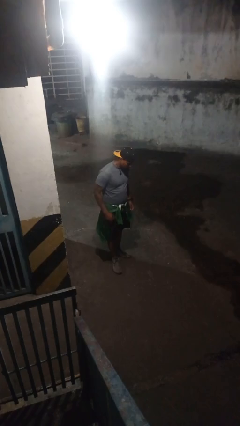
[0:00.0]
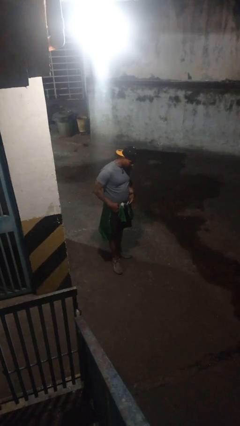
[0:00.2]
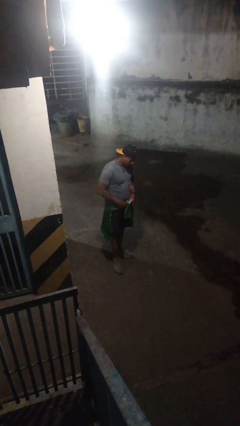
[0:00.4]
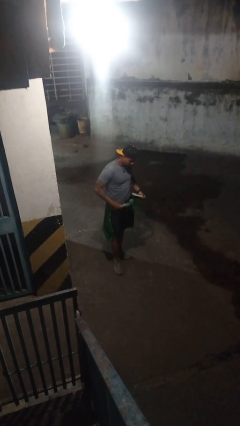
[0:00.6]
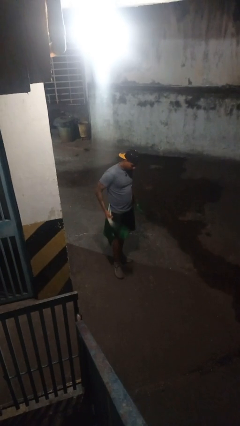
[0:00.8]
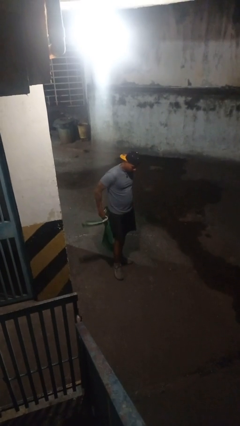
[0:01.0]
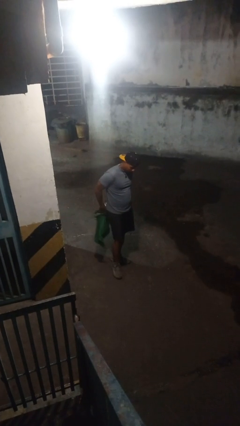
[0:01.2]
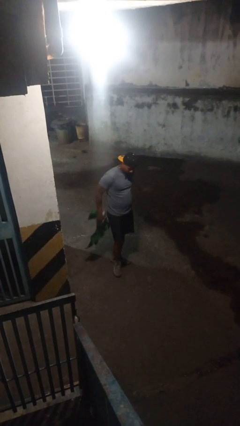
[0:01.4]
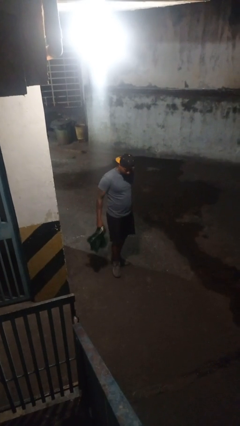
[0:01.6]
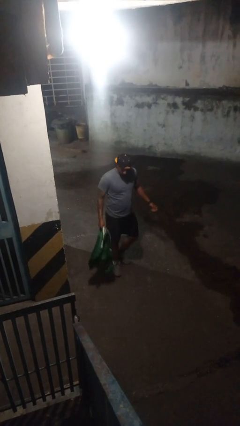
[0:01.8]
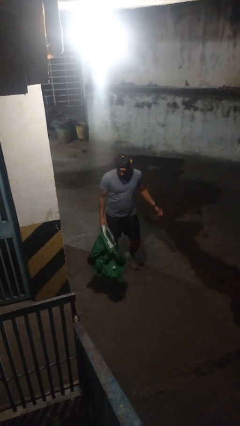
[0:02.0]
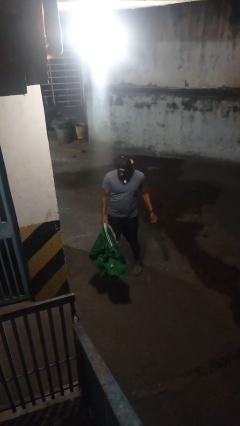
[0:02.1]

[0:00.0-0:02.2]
person unties jacket around waist

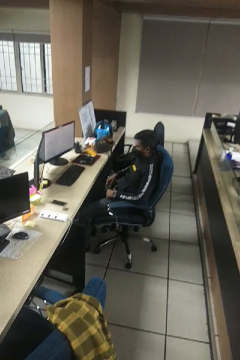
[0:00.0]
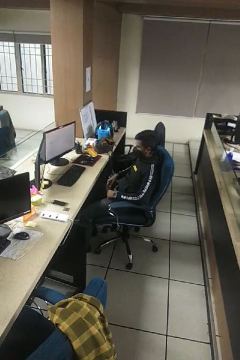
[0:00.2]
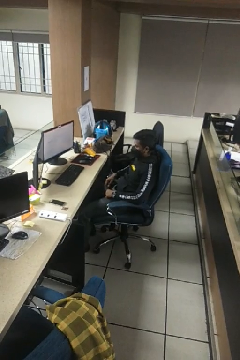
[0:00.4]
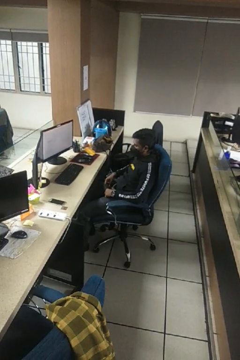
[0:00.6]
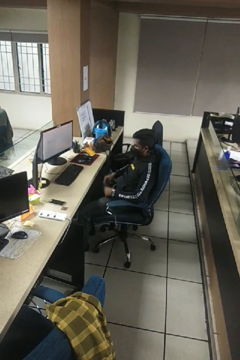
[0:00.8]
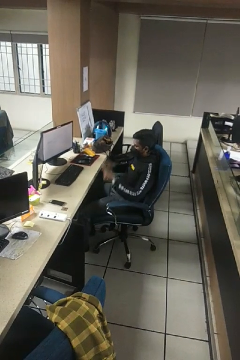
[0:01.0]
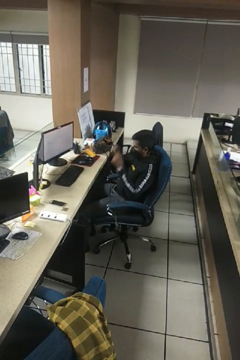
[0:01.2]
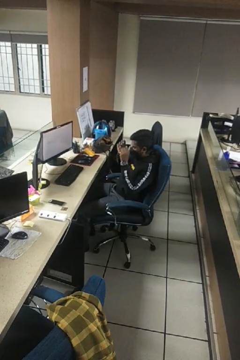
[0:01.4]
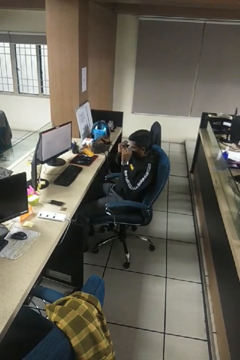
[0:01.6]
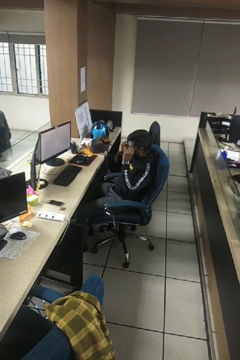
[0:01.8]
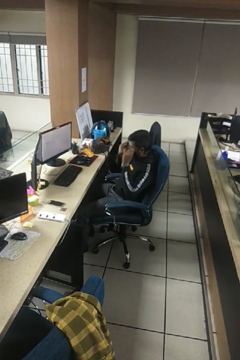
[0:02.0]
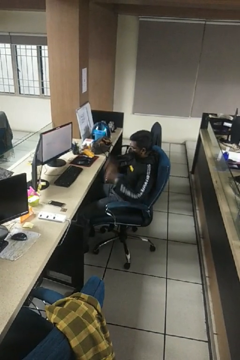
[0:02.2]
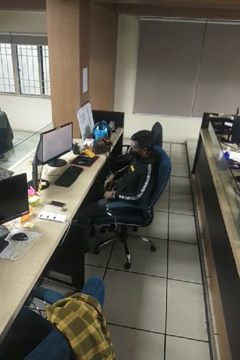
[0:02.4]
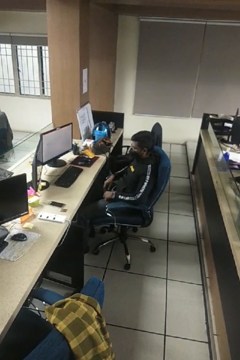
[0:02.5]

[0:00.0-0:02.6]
person puts on glasses

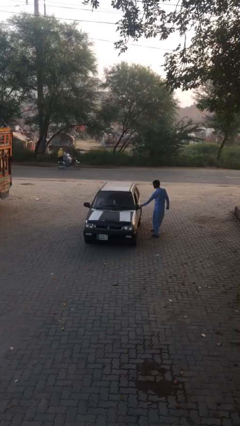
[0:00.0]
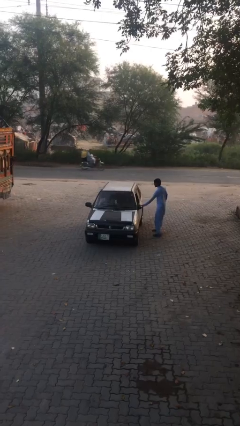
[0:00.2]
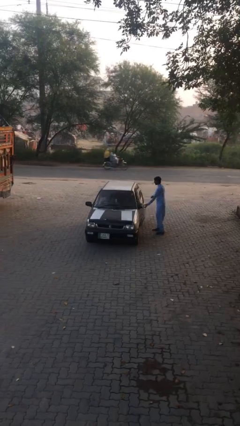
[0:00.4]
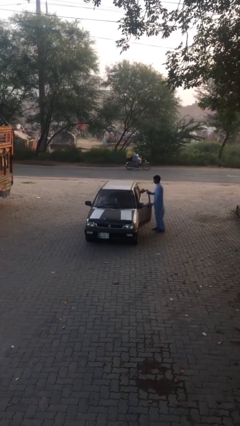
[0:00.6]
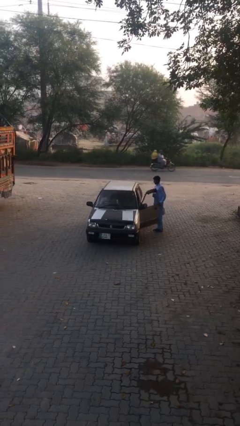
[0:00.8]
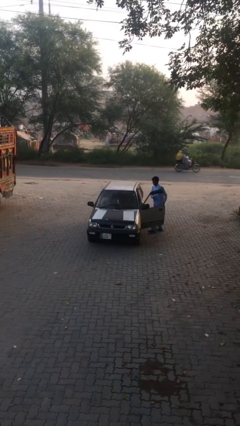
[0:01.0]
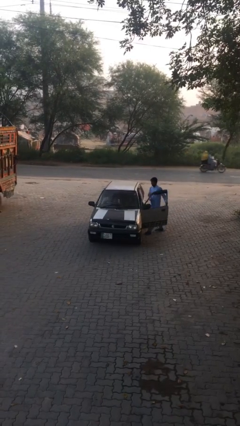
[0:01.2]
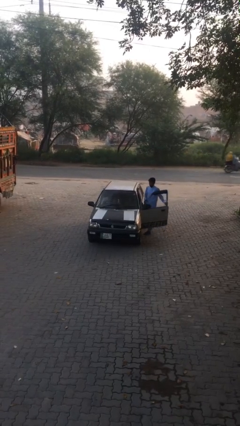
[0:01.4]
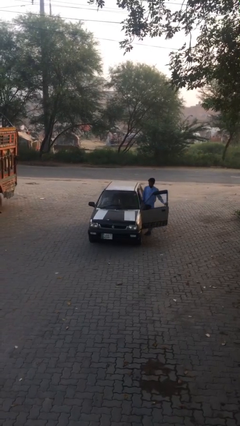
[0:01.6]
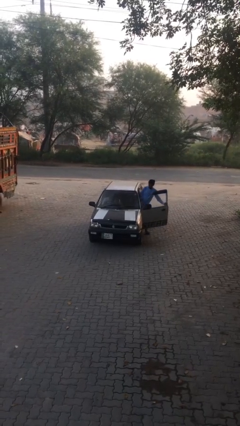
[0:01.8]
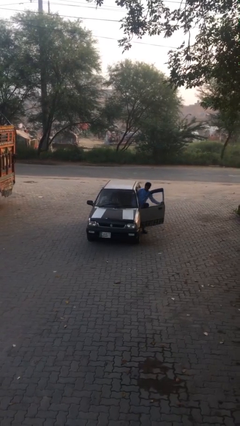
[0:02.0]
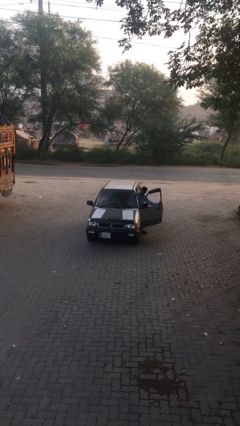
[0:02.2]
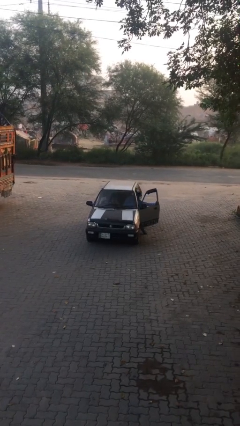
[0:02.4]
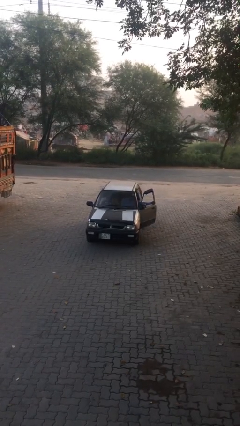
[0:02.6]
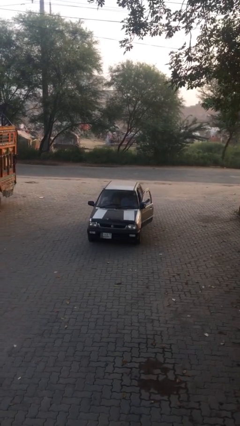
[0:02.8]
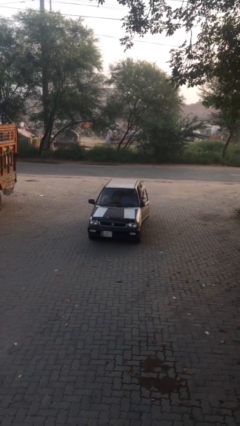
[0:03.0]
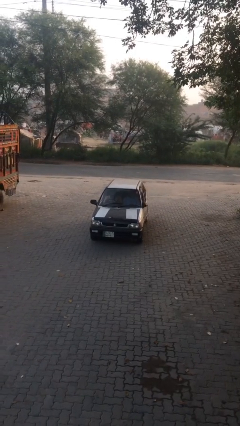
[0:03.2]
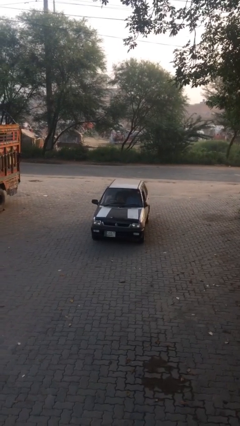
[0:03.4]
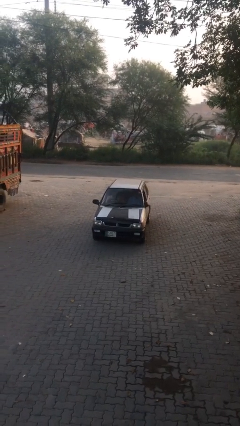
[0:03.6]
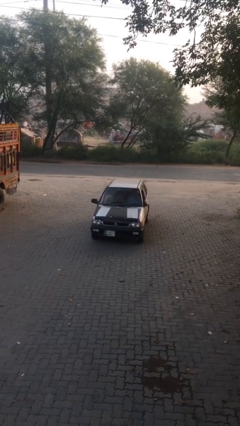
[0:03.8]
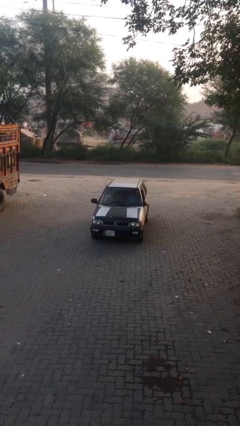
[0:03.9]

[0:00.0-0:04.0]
car picks up person

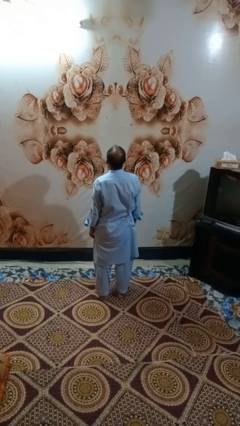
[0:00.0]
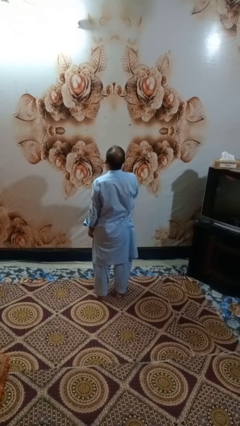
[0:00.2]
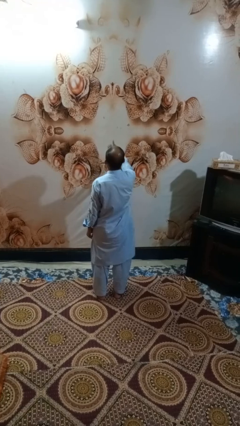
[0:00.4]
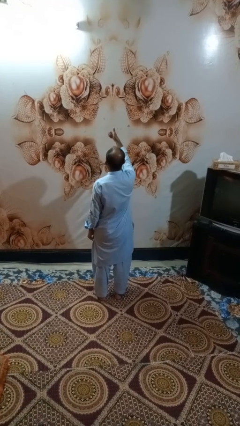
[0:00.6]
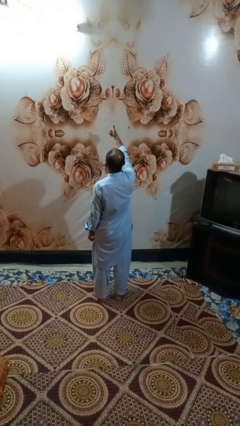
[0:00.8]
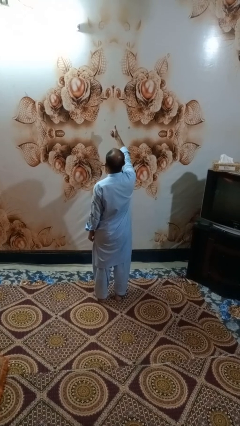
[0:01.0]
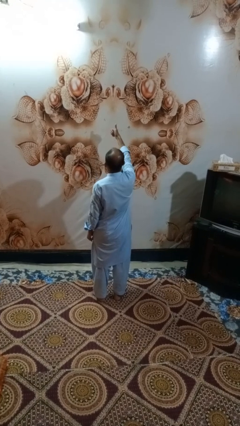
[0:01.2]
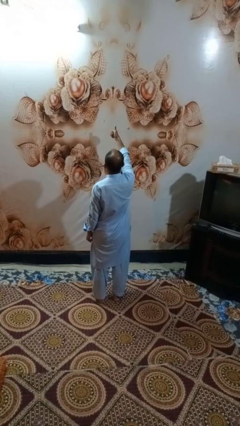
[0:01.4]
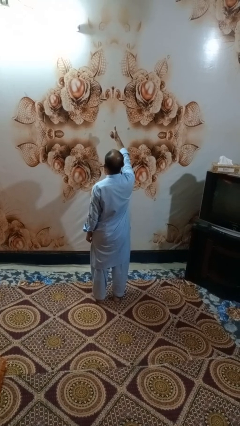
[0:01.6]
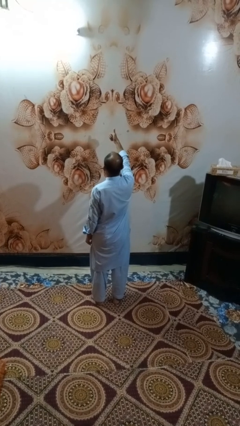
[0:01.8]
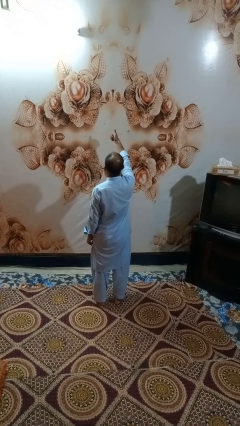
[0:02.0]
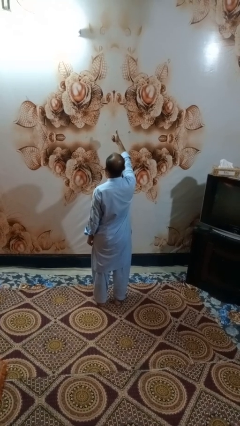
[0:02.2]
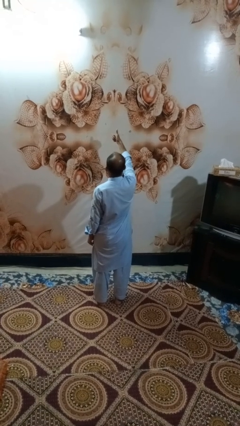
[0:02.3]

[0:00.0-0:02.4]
person gestures thumbs up

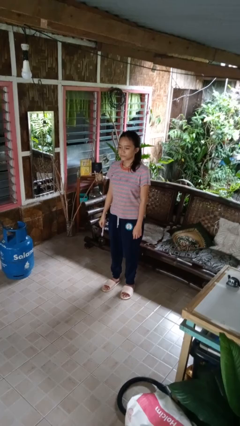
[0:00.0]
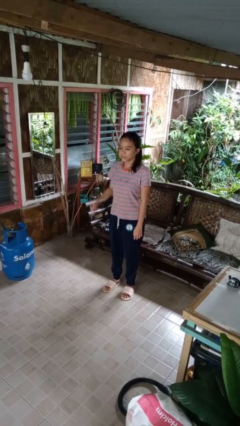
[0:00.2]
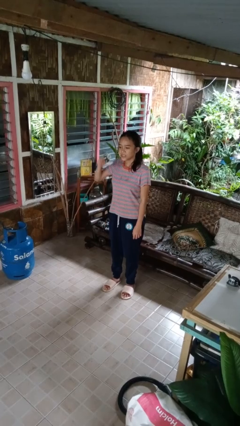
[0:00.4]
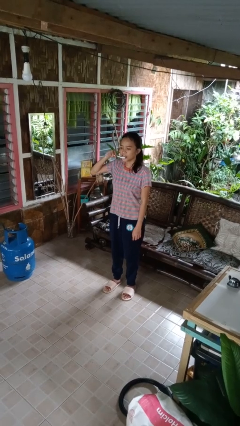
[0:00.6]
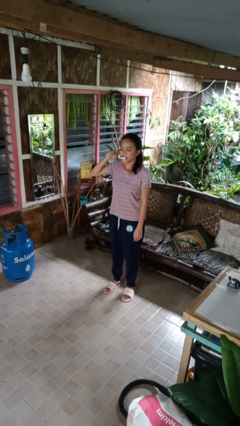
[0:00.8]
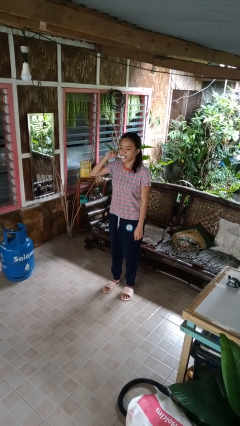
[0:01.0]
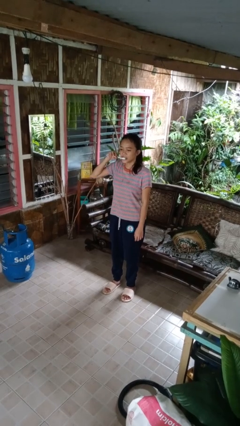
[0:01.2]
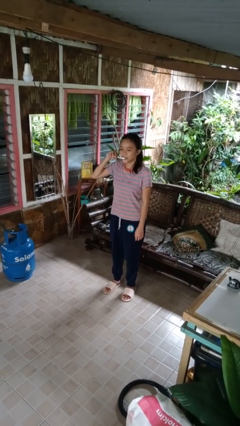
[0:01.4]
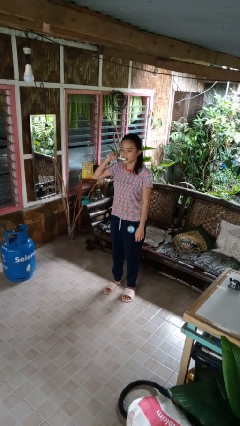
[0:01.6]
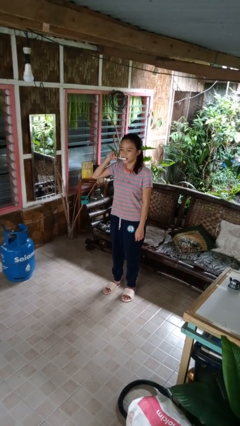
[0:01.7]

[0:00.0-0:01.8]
person brushes teeth

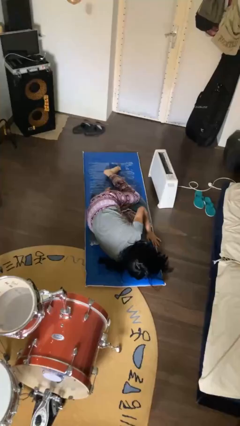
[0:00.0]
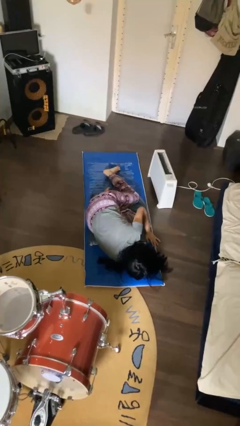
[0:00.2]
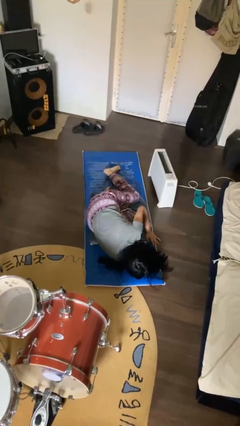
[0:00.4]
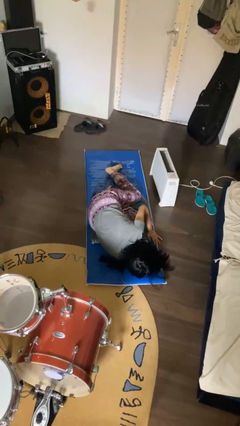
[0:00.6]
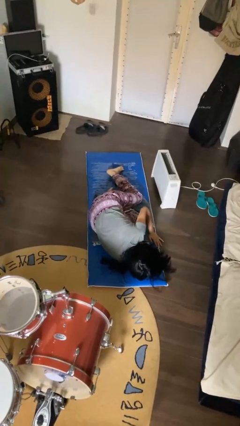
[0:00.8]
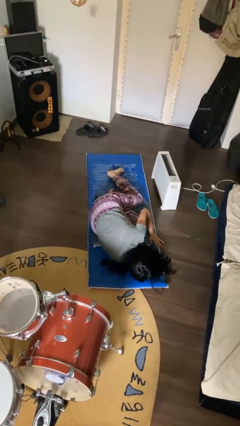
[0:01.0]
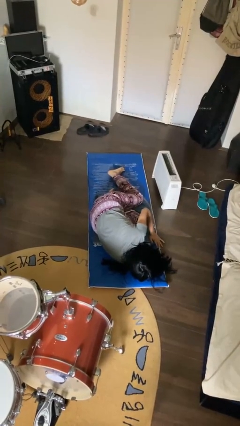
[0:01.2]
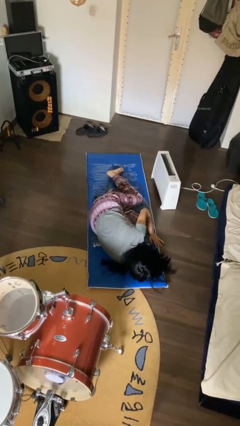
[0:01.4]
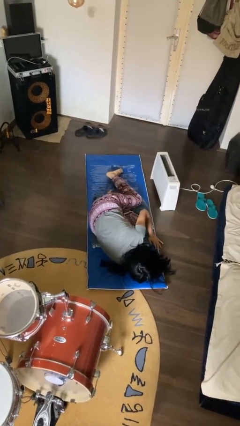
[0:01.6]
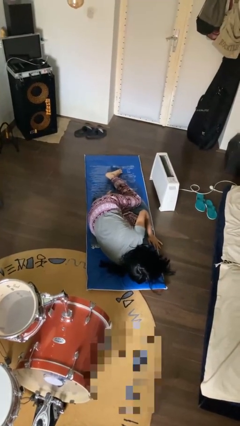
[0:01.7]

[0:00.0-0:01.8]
person lies down on floor

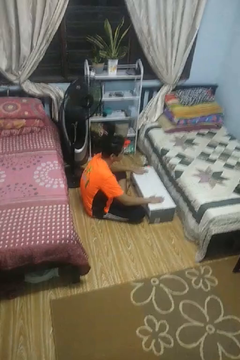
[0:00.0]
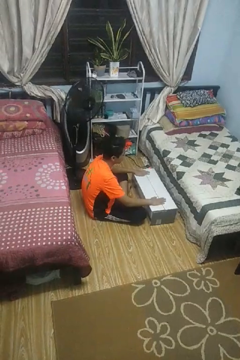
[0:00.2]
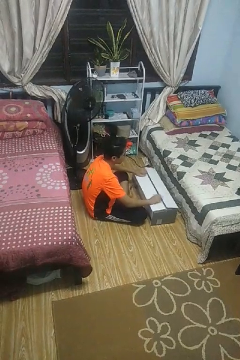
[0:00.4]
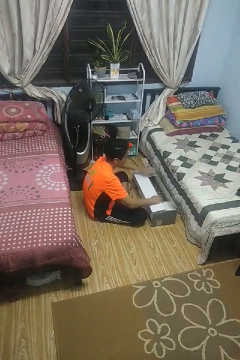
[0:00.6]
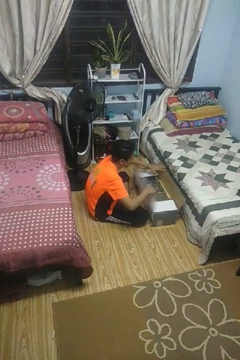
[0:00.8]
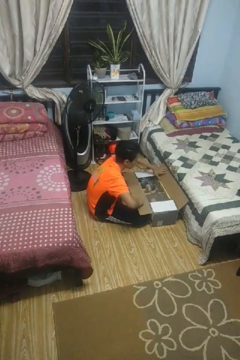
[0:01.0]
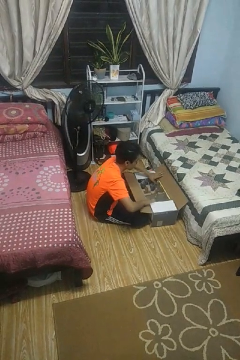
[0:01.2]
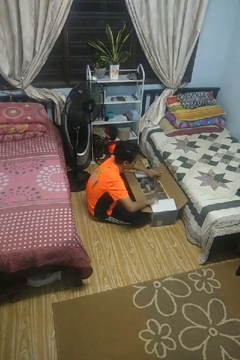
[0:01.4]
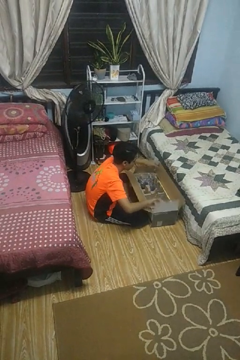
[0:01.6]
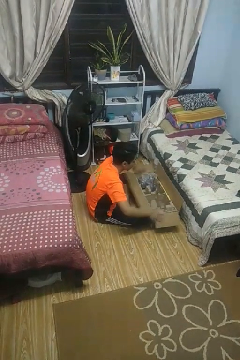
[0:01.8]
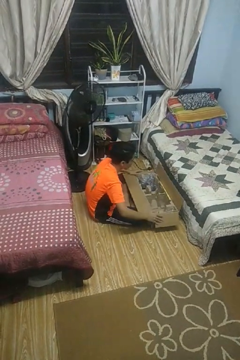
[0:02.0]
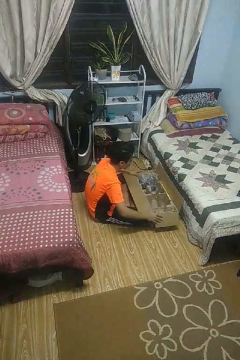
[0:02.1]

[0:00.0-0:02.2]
person opens box

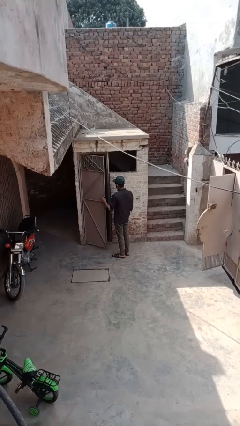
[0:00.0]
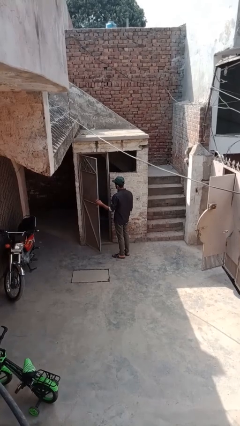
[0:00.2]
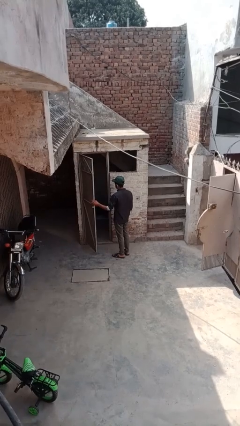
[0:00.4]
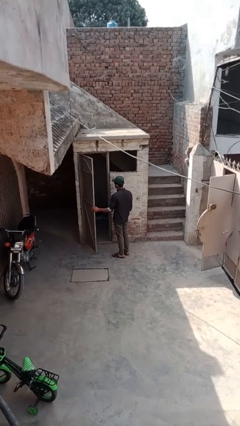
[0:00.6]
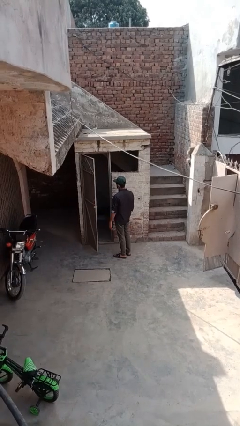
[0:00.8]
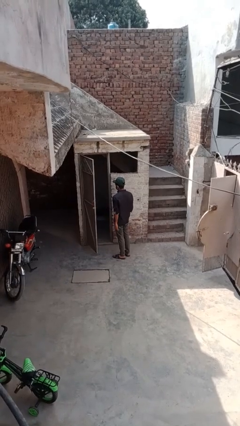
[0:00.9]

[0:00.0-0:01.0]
person opens facility door
